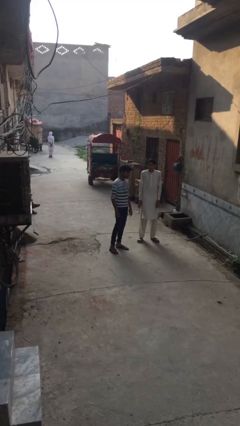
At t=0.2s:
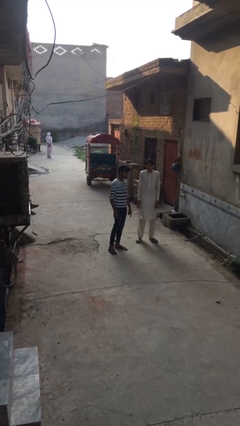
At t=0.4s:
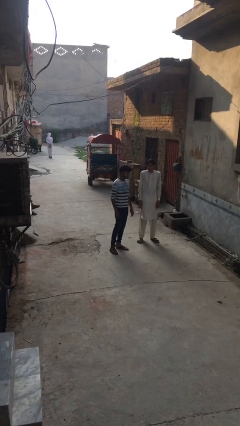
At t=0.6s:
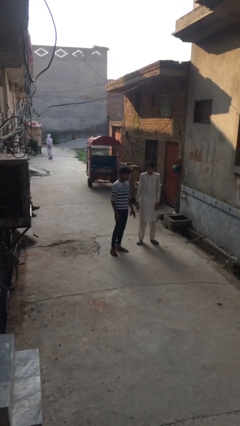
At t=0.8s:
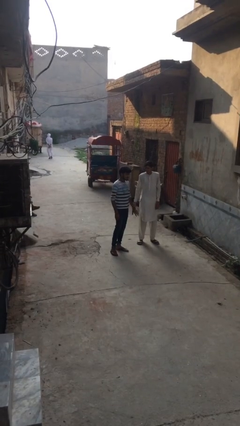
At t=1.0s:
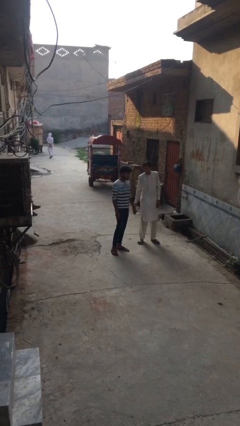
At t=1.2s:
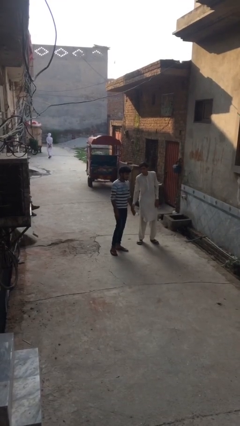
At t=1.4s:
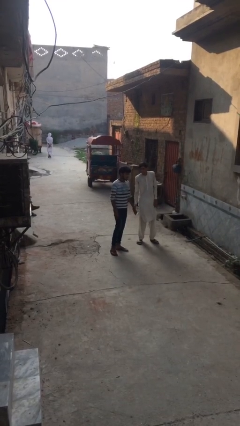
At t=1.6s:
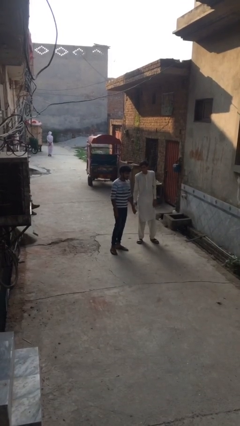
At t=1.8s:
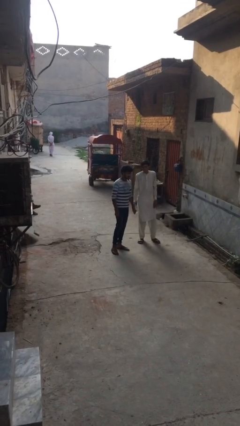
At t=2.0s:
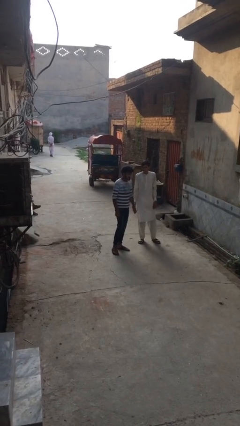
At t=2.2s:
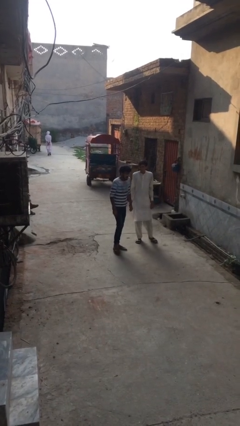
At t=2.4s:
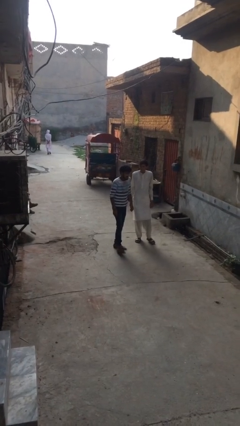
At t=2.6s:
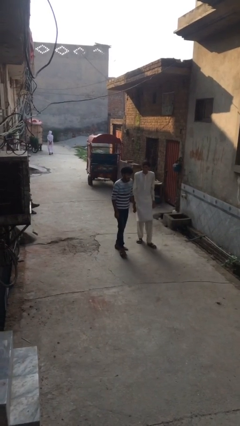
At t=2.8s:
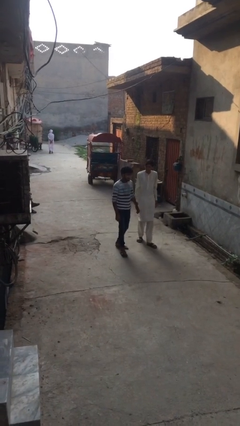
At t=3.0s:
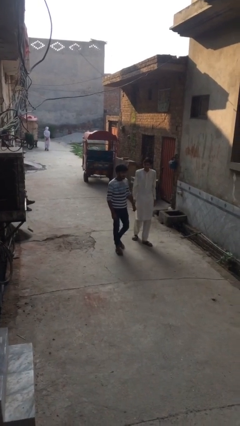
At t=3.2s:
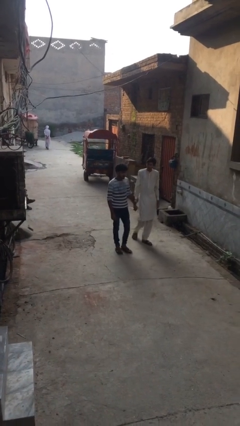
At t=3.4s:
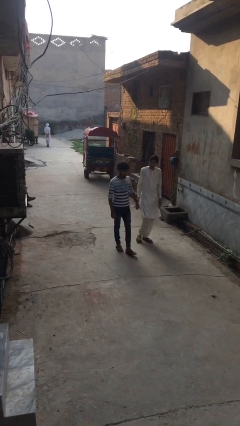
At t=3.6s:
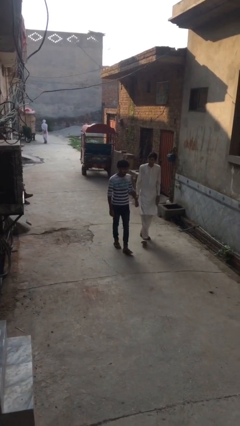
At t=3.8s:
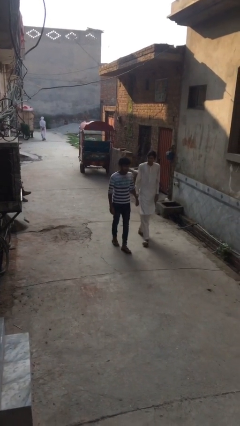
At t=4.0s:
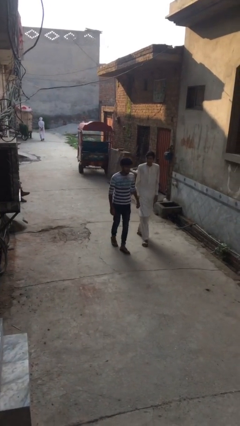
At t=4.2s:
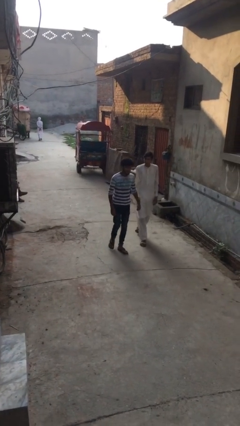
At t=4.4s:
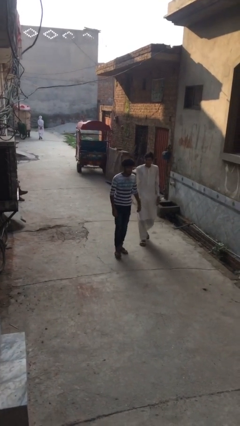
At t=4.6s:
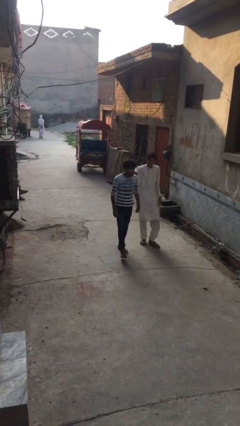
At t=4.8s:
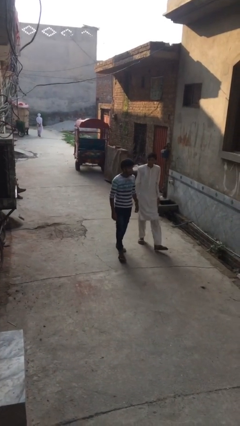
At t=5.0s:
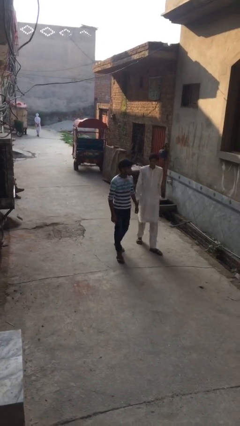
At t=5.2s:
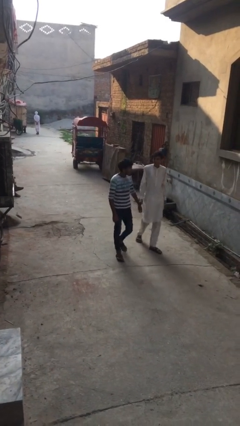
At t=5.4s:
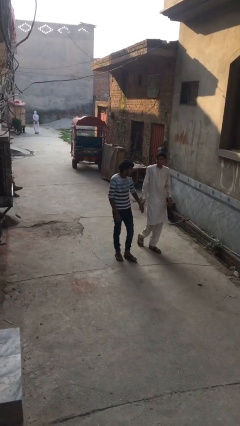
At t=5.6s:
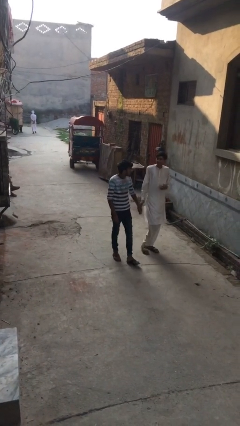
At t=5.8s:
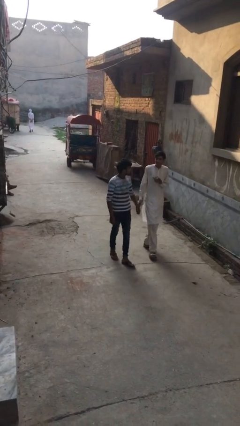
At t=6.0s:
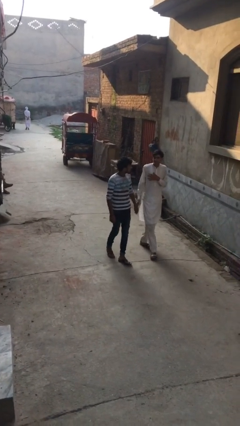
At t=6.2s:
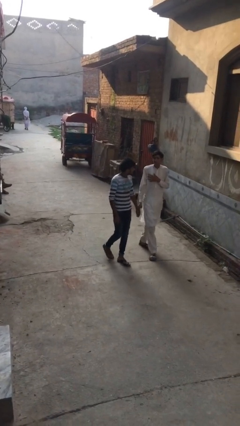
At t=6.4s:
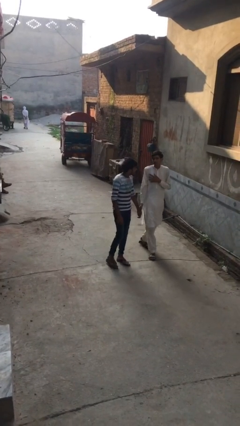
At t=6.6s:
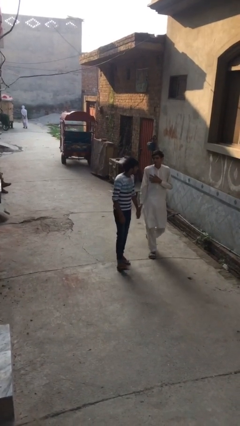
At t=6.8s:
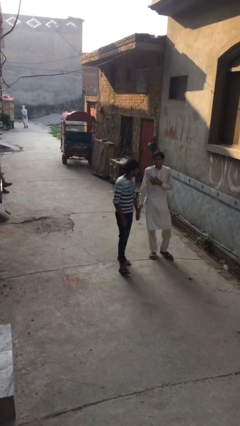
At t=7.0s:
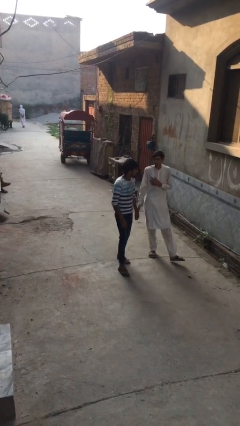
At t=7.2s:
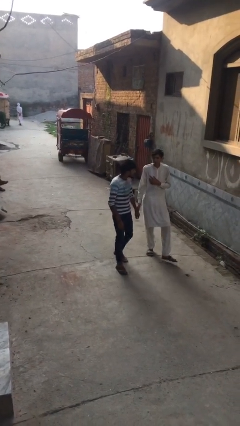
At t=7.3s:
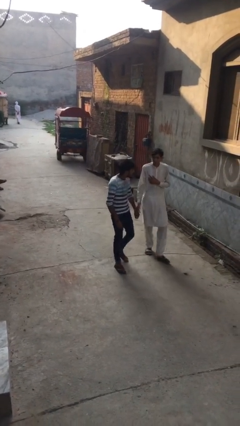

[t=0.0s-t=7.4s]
person holds hand

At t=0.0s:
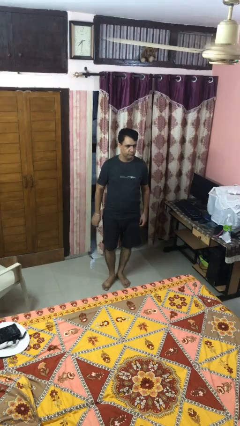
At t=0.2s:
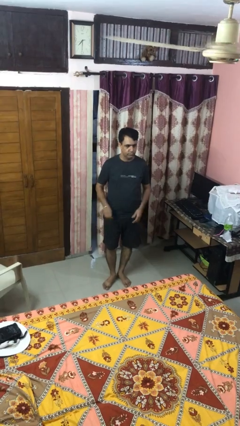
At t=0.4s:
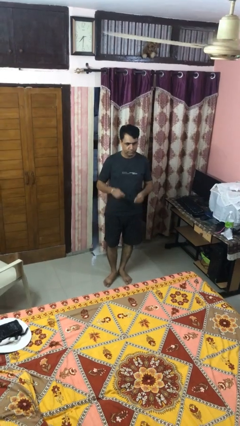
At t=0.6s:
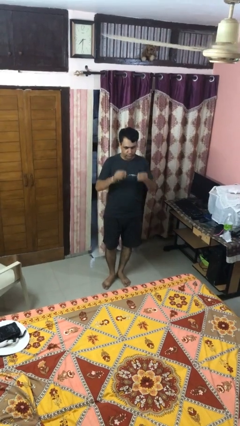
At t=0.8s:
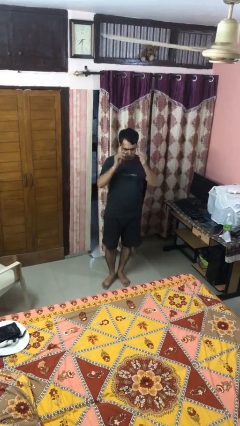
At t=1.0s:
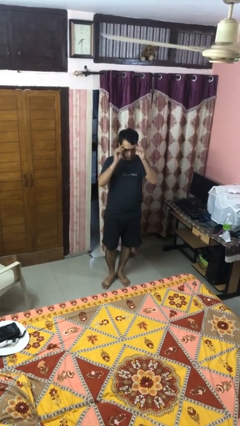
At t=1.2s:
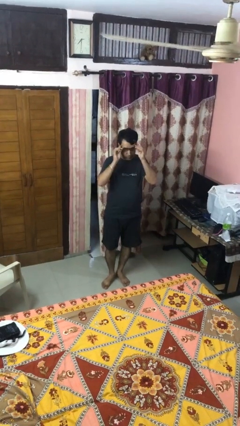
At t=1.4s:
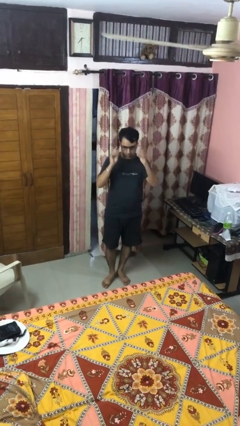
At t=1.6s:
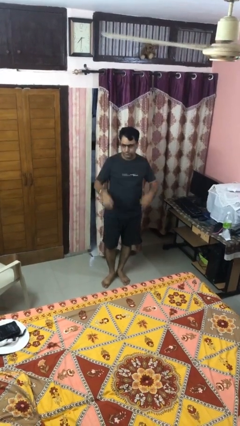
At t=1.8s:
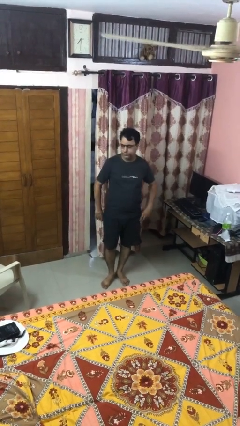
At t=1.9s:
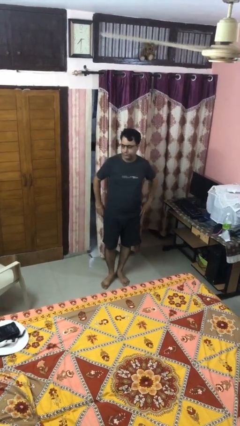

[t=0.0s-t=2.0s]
person puts on glasses

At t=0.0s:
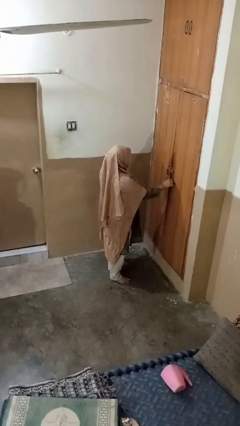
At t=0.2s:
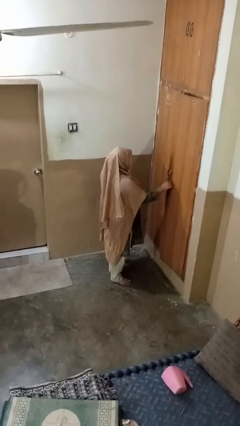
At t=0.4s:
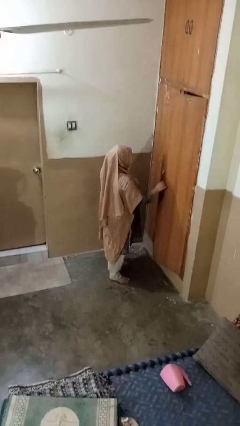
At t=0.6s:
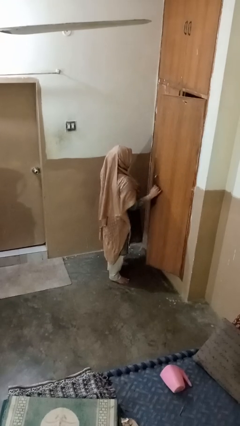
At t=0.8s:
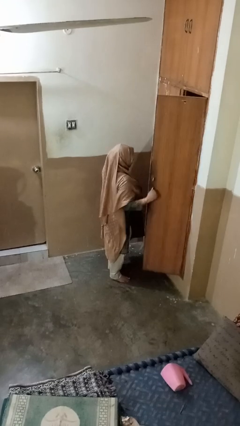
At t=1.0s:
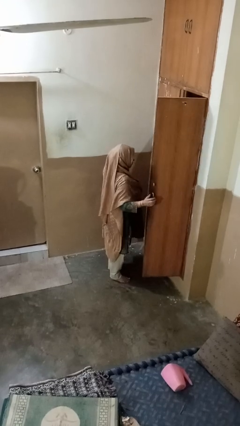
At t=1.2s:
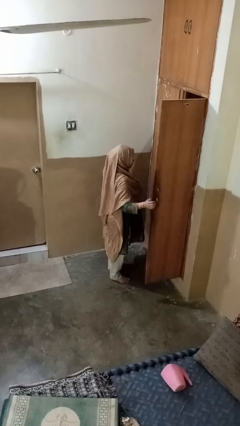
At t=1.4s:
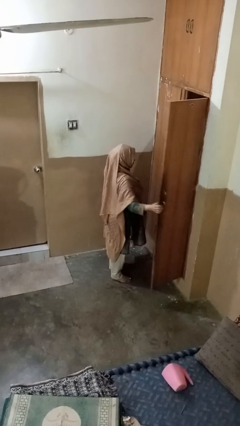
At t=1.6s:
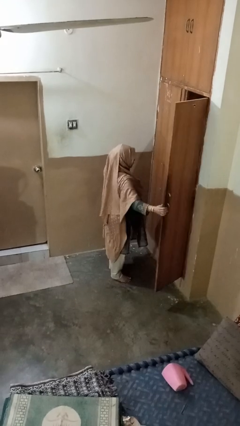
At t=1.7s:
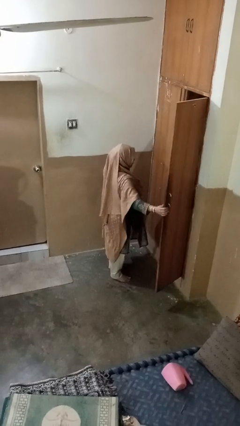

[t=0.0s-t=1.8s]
person opens closet door

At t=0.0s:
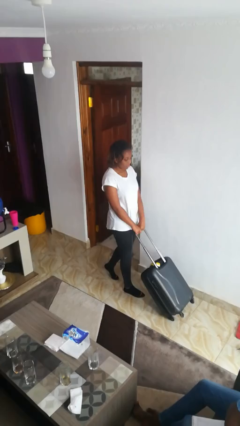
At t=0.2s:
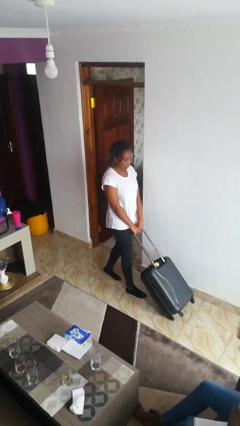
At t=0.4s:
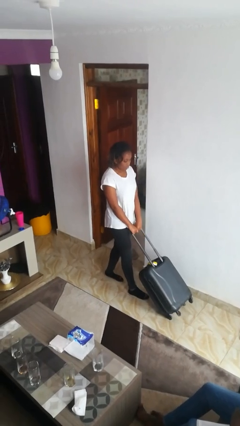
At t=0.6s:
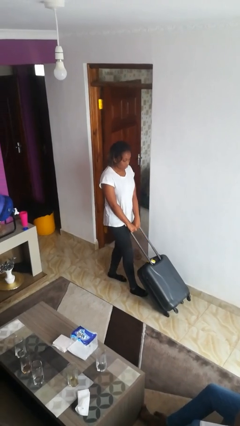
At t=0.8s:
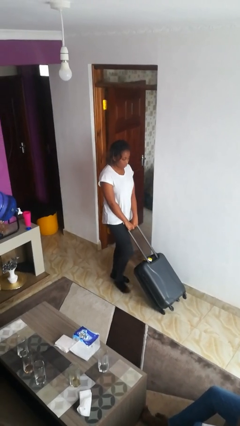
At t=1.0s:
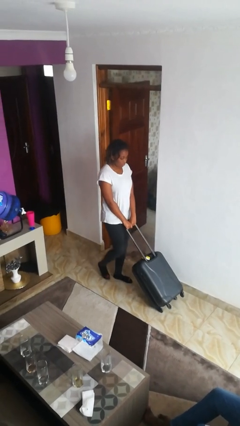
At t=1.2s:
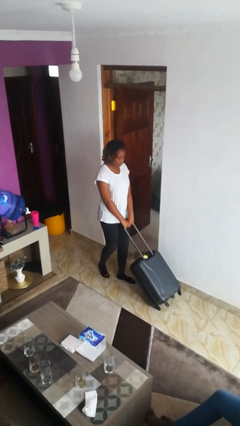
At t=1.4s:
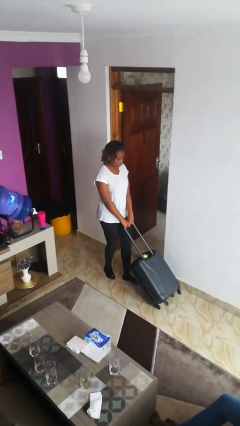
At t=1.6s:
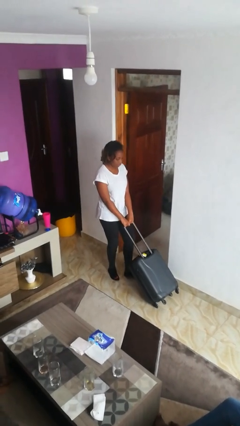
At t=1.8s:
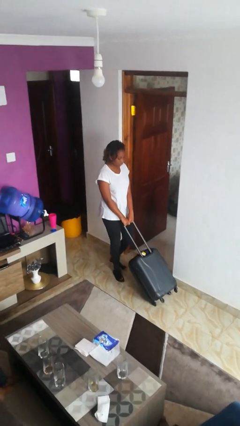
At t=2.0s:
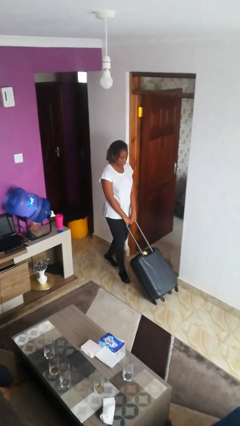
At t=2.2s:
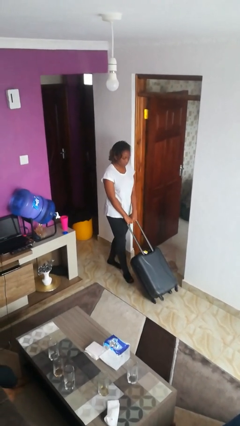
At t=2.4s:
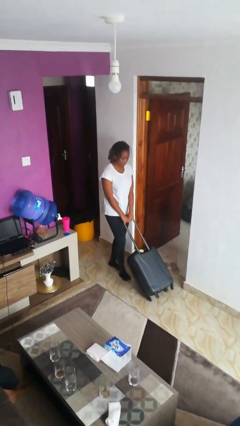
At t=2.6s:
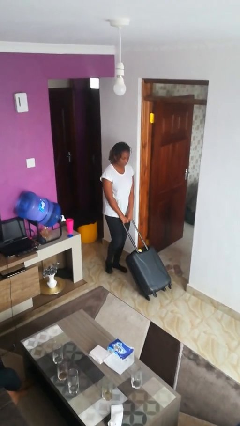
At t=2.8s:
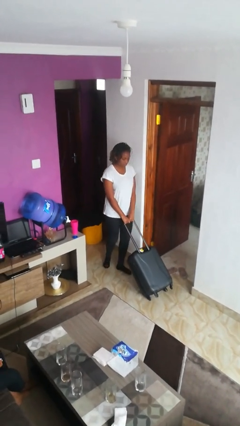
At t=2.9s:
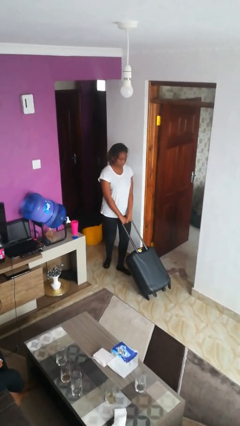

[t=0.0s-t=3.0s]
person pulls wheeled cart

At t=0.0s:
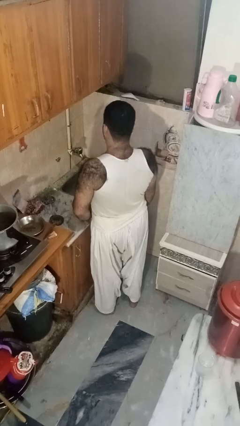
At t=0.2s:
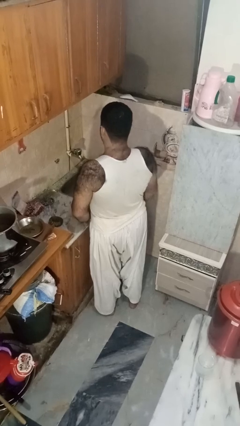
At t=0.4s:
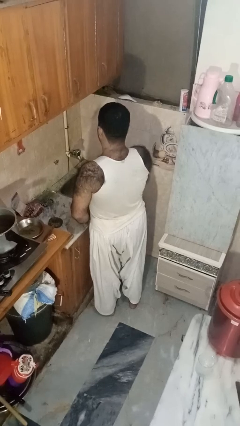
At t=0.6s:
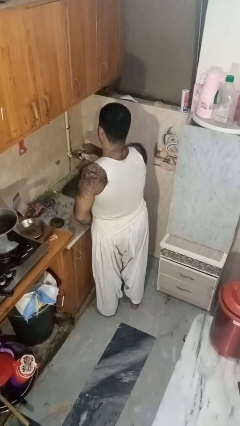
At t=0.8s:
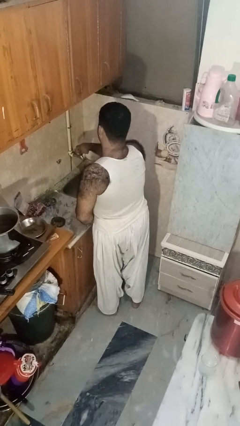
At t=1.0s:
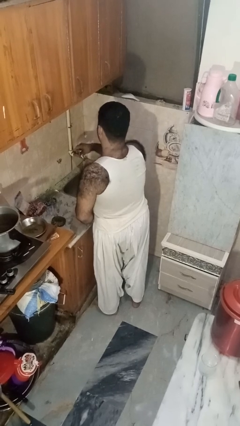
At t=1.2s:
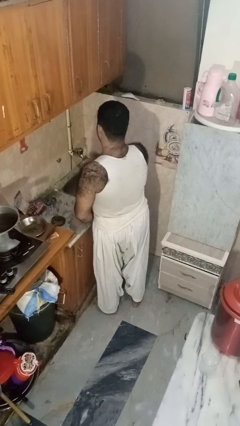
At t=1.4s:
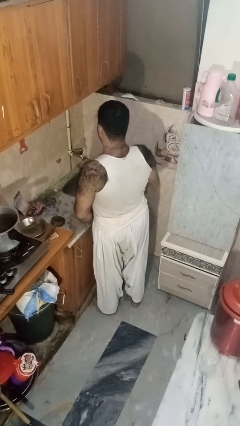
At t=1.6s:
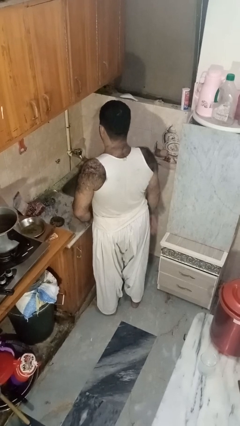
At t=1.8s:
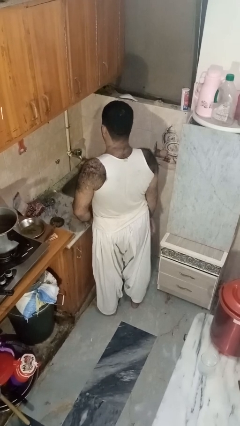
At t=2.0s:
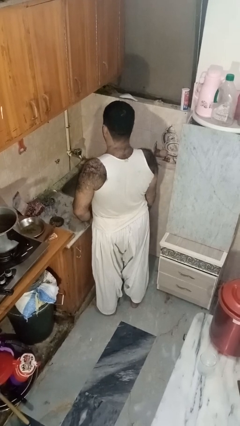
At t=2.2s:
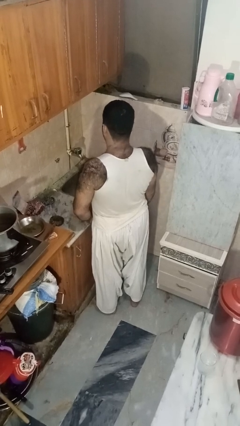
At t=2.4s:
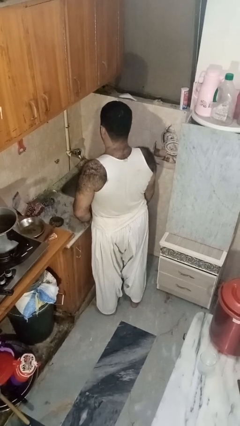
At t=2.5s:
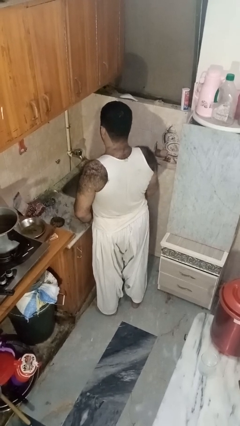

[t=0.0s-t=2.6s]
person turns on faucet

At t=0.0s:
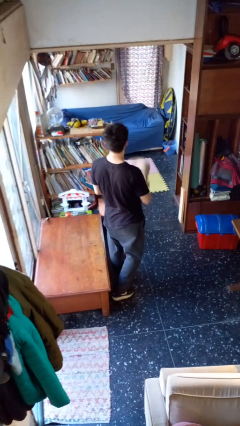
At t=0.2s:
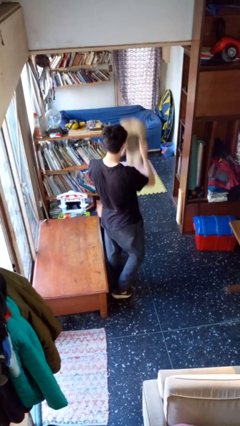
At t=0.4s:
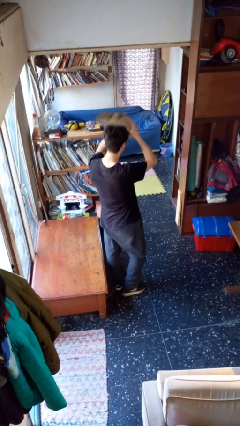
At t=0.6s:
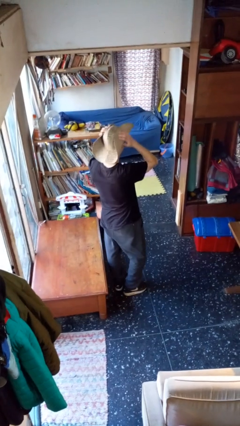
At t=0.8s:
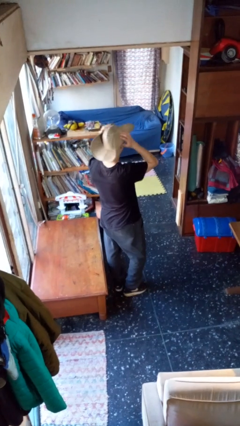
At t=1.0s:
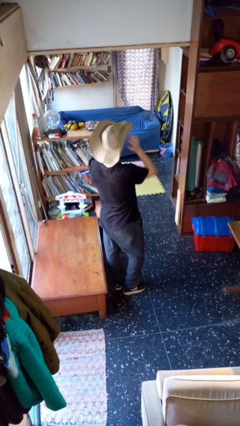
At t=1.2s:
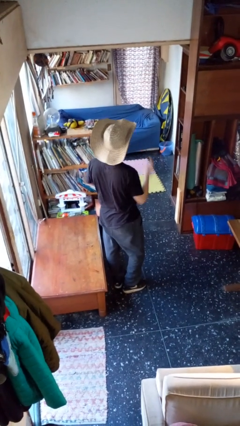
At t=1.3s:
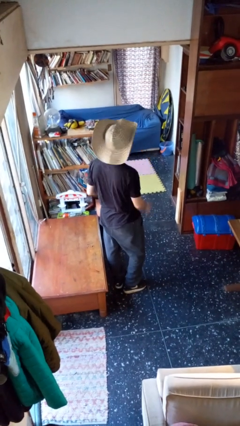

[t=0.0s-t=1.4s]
person puts on hat
